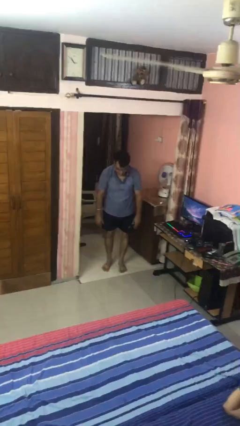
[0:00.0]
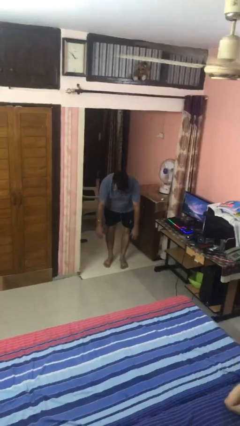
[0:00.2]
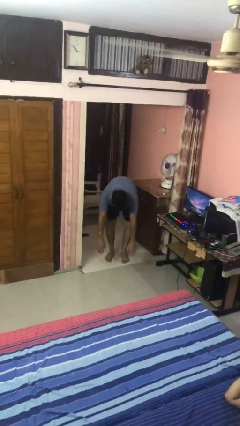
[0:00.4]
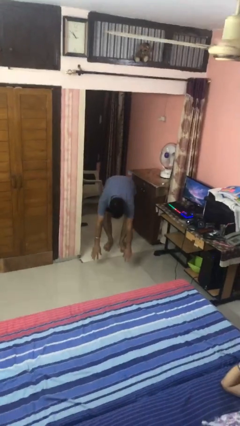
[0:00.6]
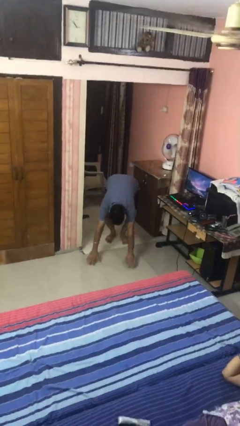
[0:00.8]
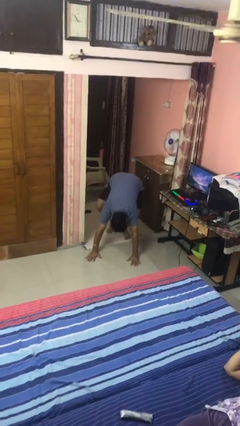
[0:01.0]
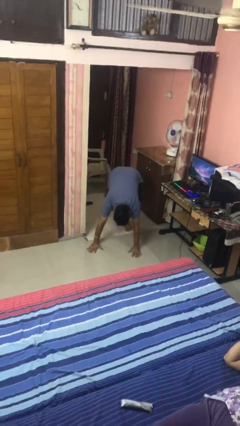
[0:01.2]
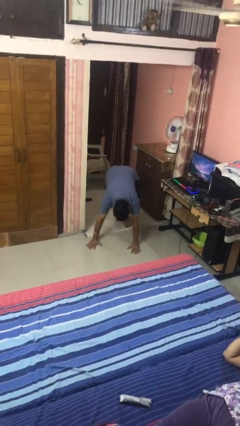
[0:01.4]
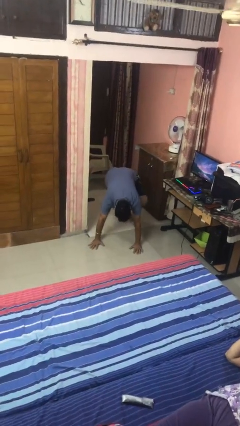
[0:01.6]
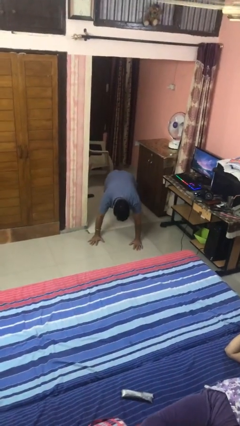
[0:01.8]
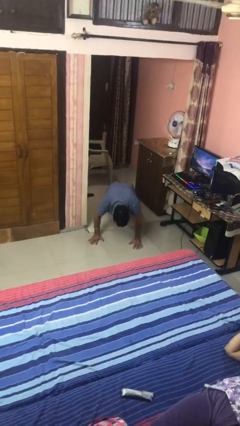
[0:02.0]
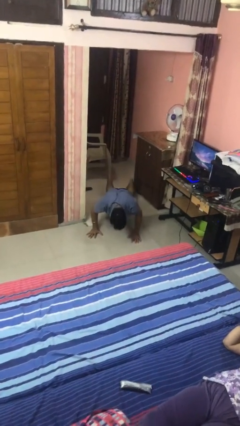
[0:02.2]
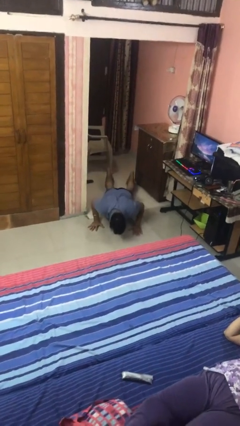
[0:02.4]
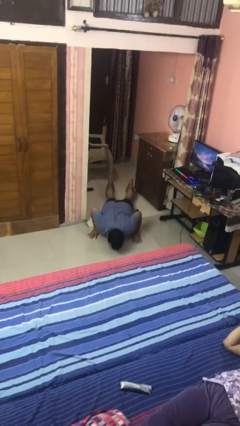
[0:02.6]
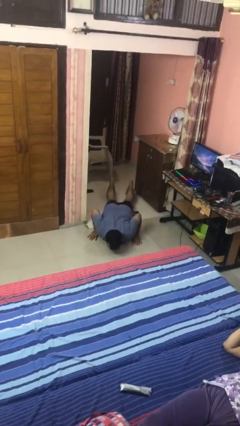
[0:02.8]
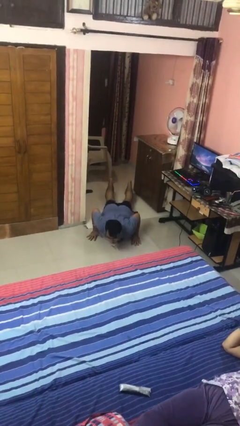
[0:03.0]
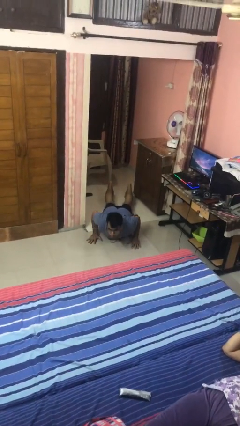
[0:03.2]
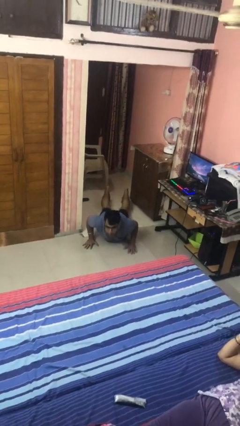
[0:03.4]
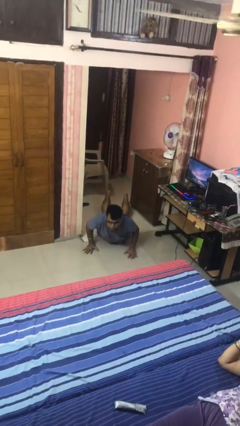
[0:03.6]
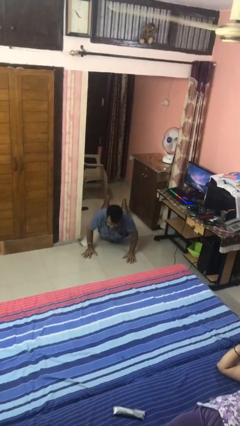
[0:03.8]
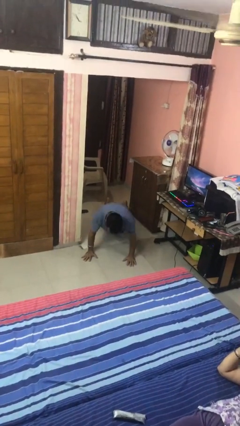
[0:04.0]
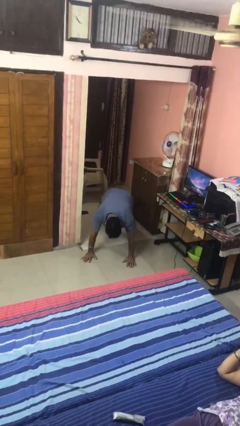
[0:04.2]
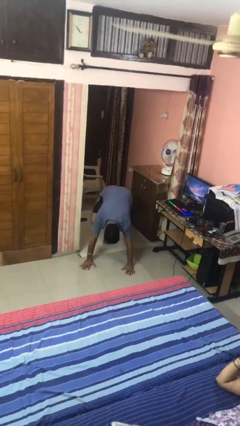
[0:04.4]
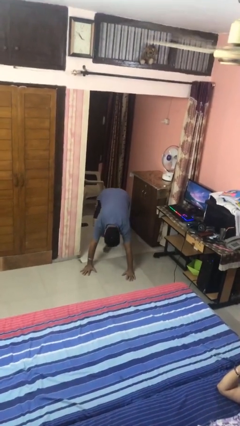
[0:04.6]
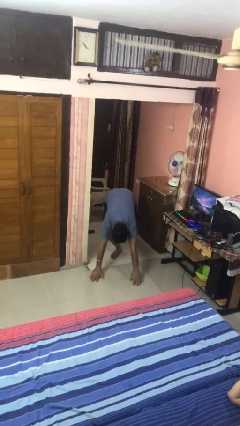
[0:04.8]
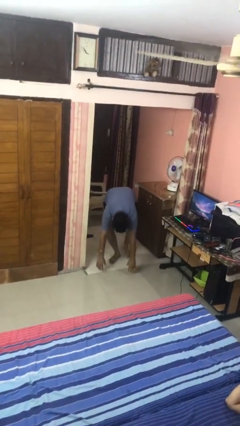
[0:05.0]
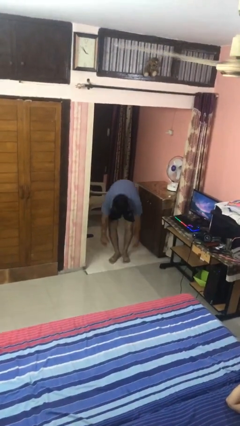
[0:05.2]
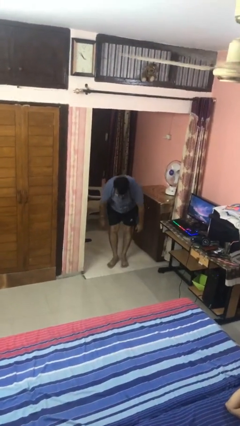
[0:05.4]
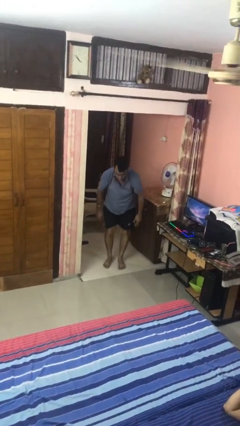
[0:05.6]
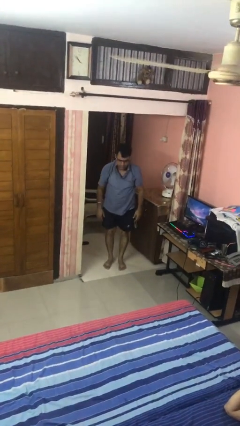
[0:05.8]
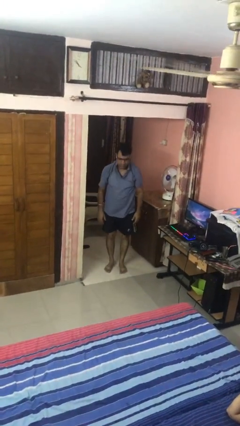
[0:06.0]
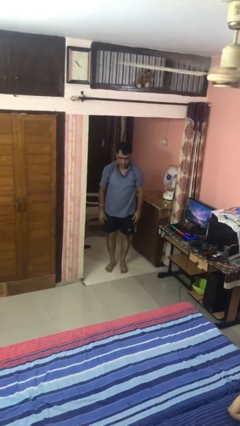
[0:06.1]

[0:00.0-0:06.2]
person exercises with pushup

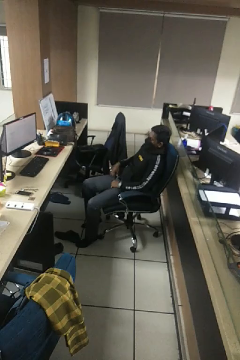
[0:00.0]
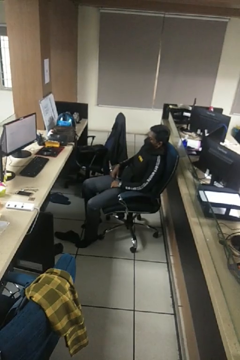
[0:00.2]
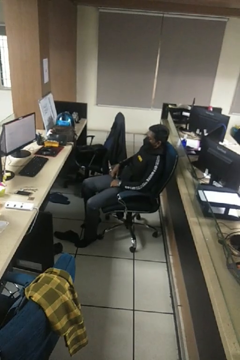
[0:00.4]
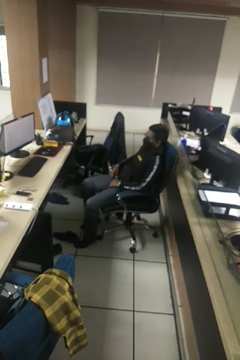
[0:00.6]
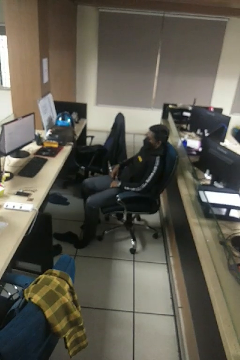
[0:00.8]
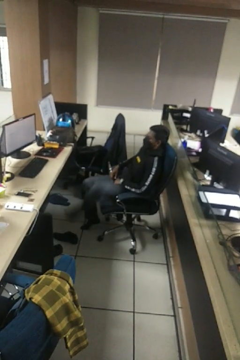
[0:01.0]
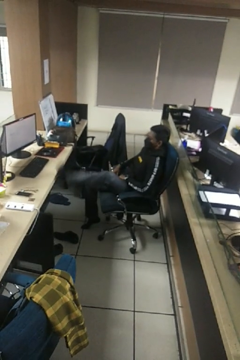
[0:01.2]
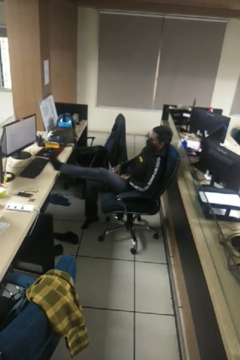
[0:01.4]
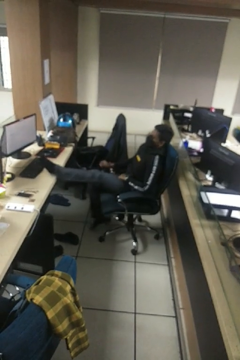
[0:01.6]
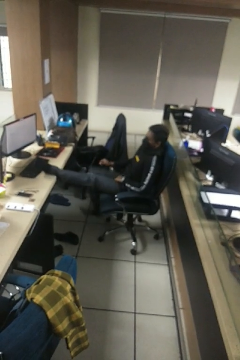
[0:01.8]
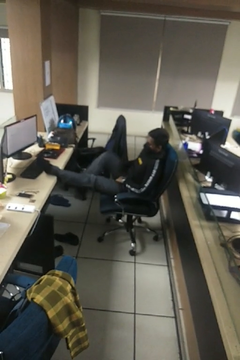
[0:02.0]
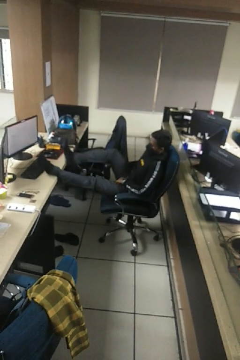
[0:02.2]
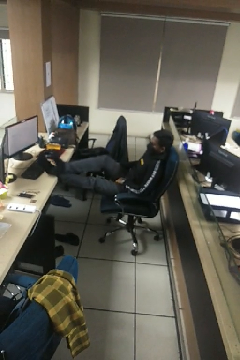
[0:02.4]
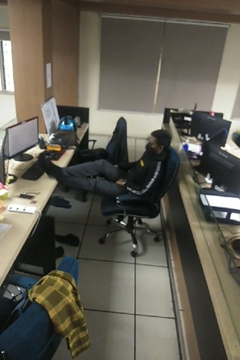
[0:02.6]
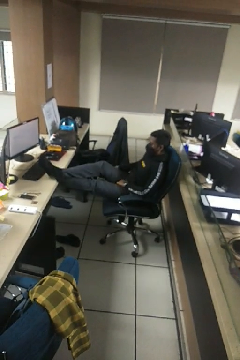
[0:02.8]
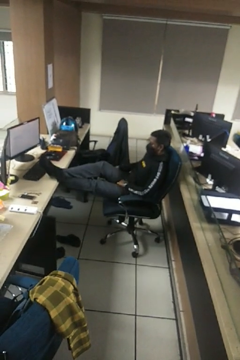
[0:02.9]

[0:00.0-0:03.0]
person puts feet up

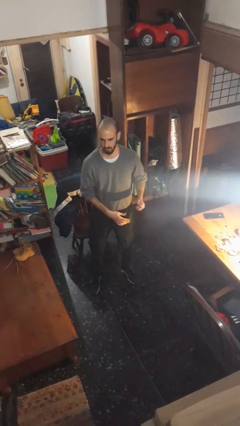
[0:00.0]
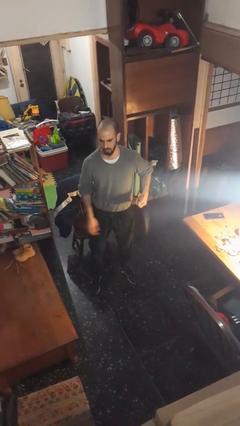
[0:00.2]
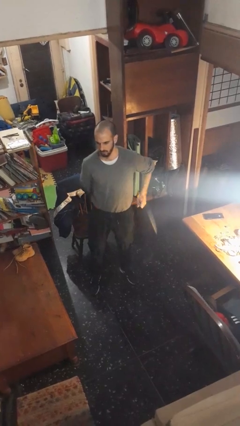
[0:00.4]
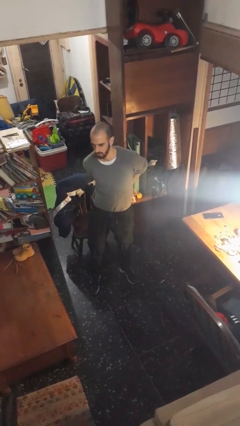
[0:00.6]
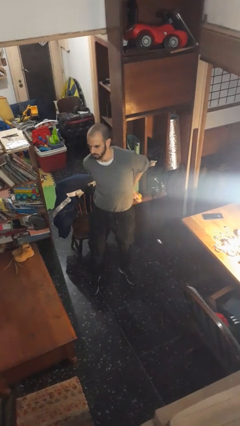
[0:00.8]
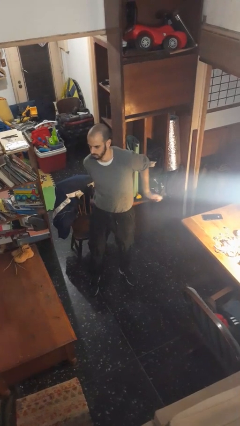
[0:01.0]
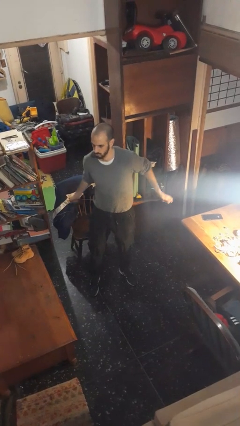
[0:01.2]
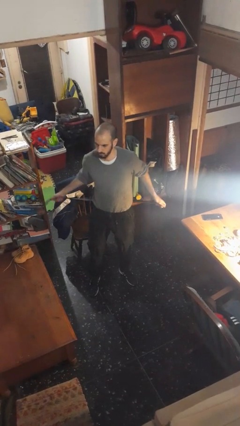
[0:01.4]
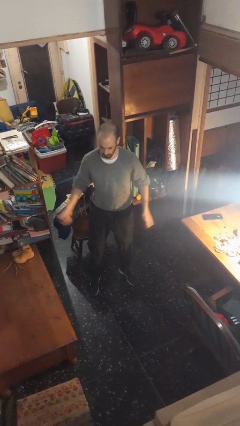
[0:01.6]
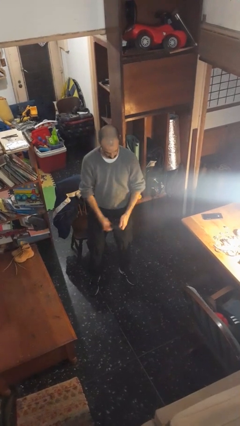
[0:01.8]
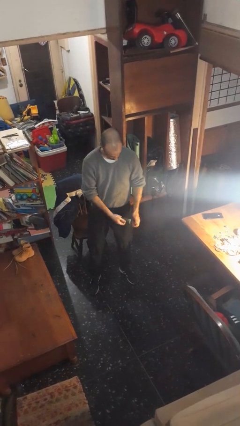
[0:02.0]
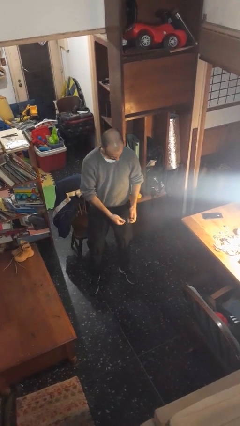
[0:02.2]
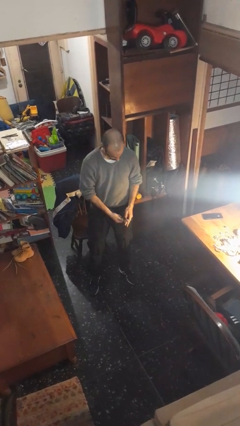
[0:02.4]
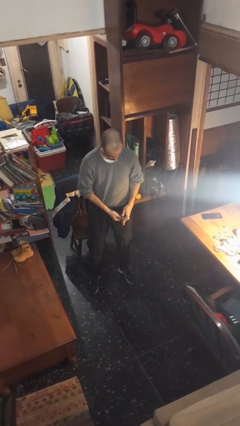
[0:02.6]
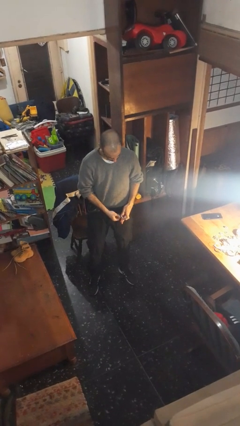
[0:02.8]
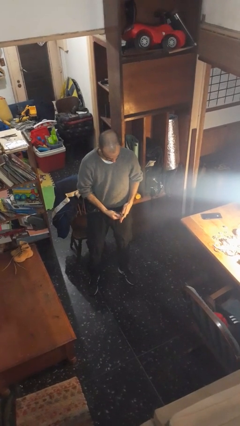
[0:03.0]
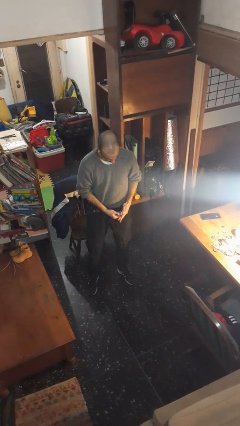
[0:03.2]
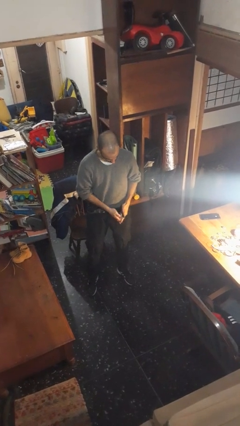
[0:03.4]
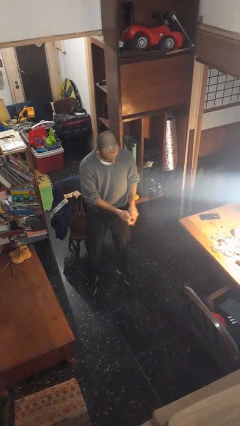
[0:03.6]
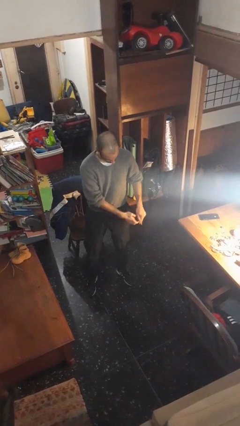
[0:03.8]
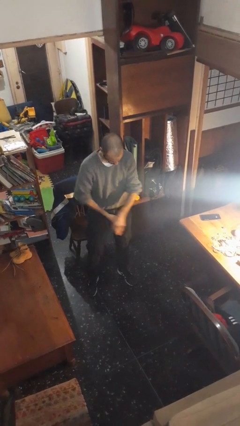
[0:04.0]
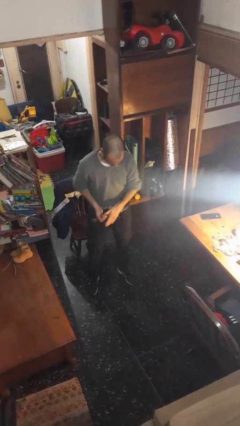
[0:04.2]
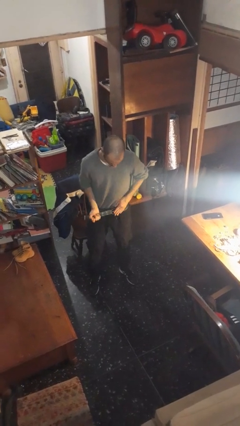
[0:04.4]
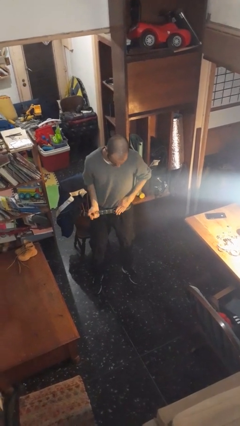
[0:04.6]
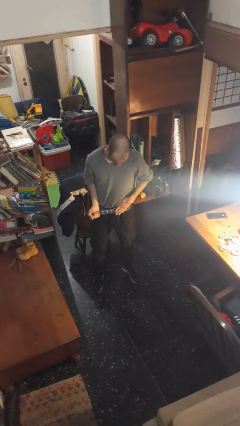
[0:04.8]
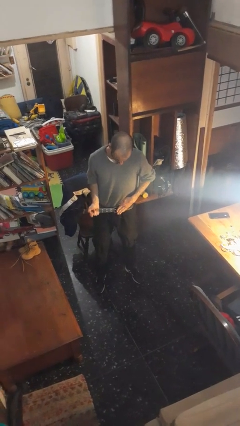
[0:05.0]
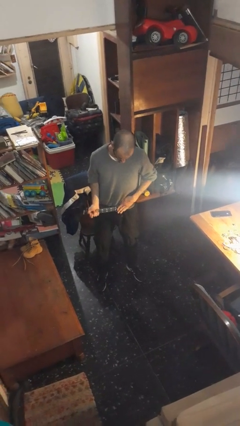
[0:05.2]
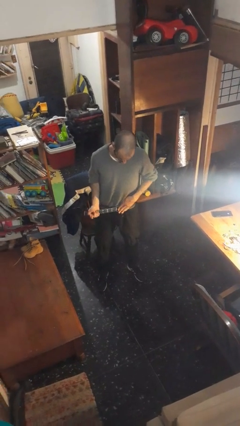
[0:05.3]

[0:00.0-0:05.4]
person puts on belt

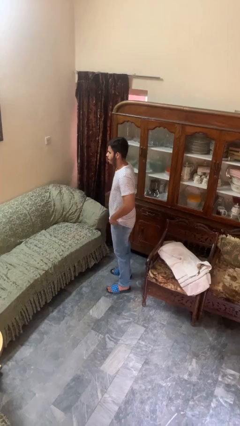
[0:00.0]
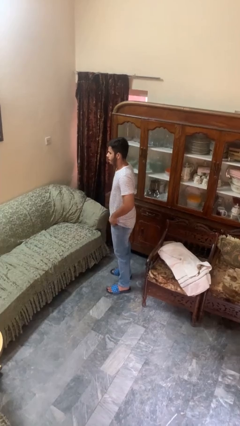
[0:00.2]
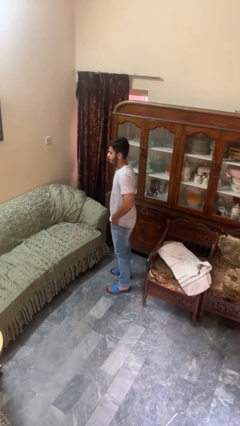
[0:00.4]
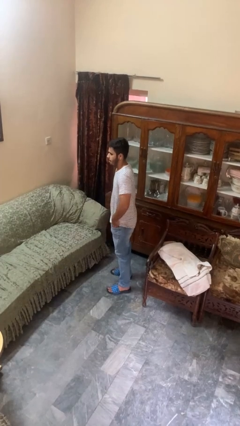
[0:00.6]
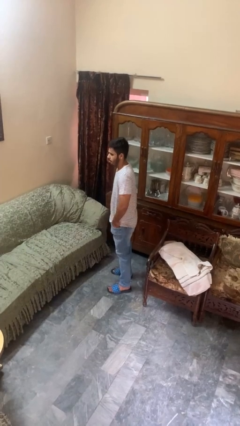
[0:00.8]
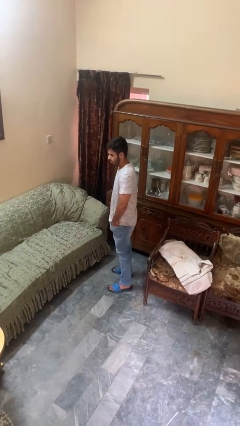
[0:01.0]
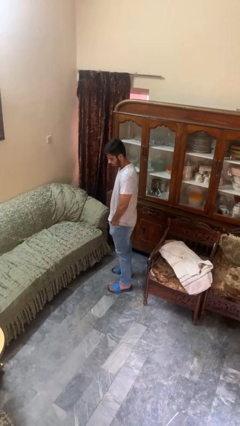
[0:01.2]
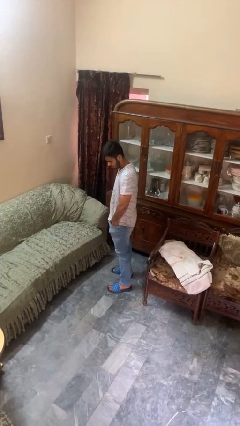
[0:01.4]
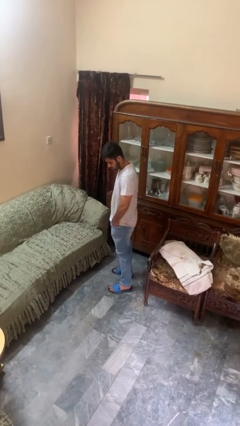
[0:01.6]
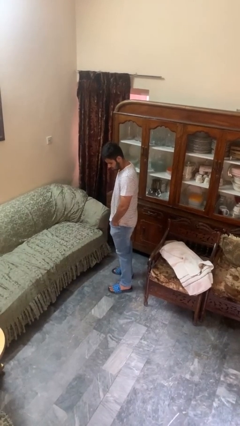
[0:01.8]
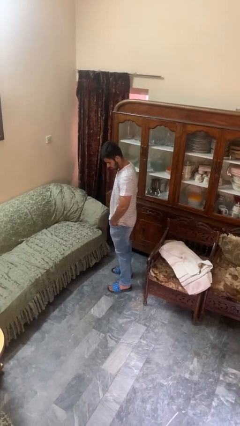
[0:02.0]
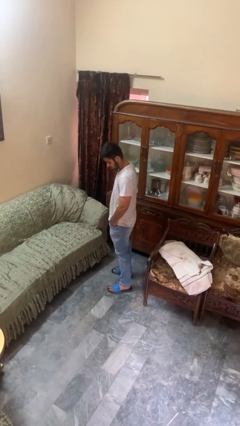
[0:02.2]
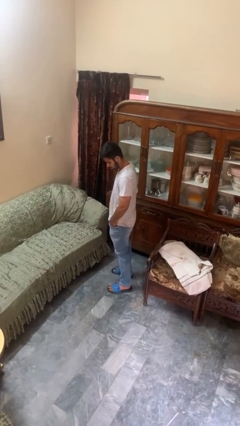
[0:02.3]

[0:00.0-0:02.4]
person puts hands in back pockets

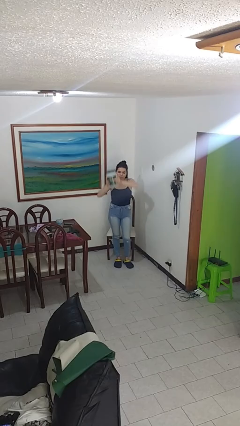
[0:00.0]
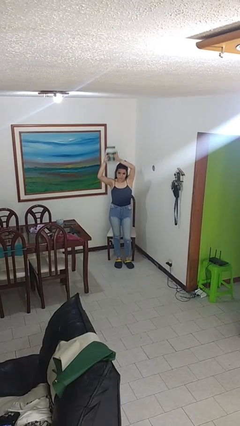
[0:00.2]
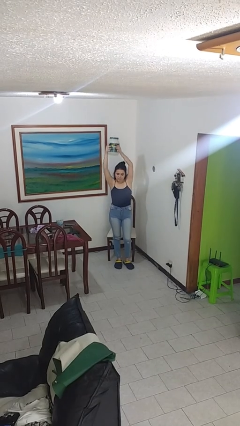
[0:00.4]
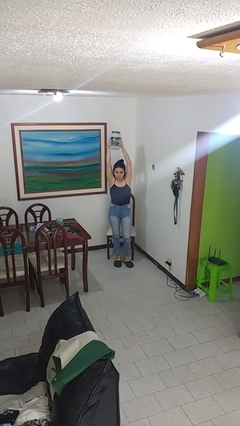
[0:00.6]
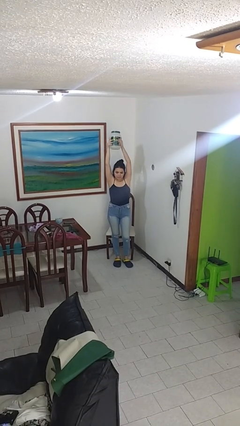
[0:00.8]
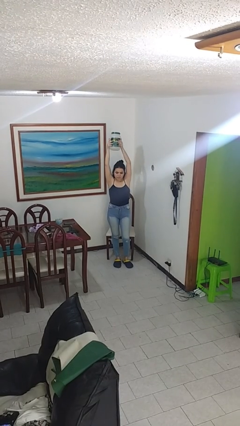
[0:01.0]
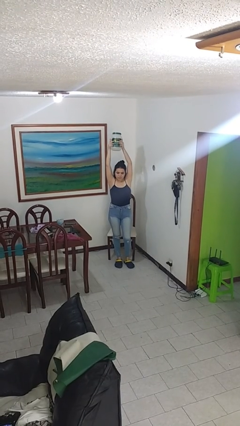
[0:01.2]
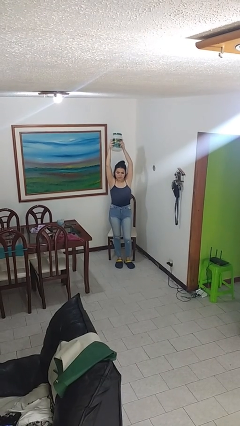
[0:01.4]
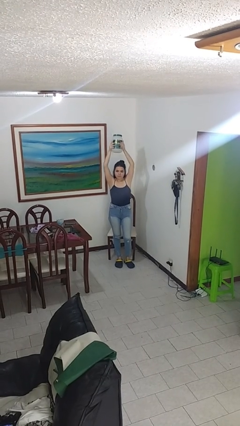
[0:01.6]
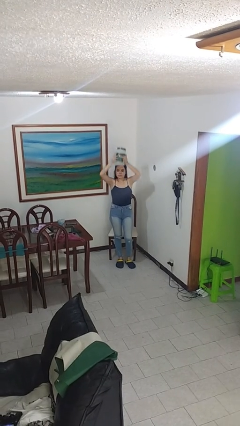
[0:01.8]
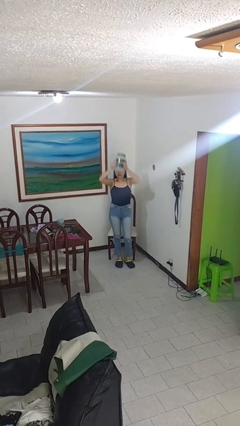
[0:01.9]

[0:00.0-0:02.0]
person holds object above head
